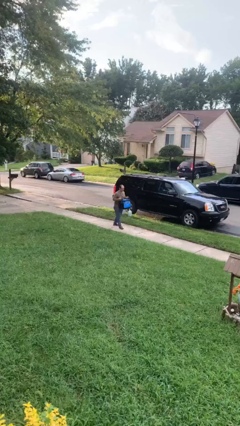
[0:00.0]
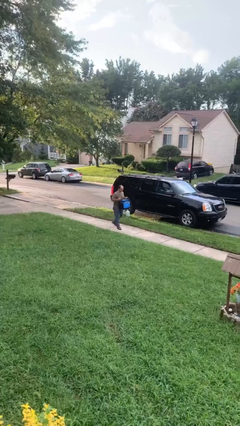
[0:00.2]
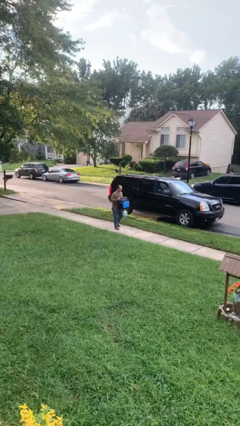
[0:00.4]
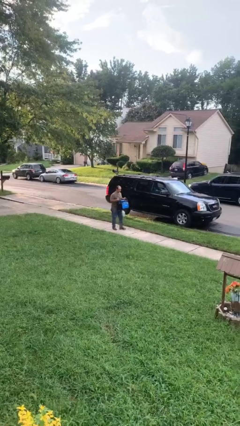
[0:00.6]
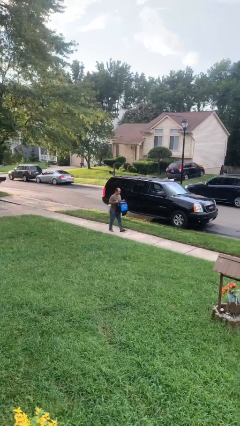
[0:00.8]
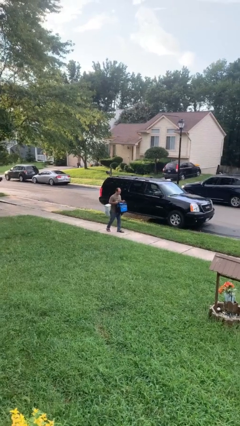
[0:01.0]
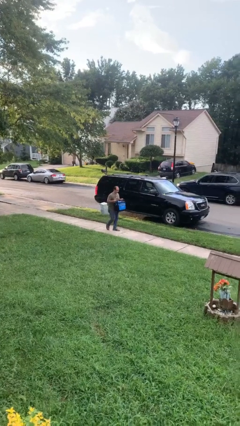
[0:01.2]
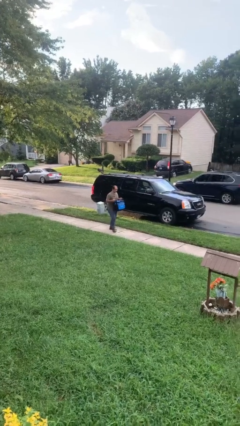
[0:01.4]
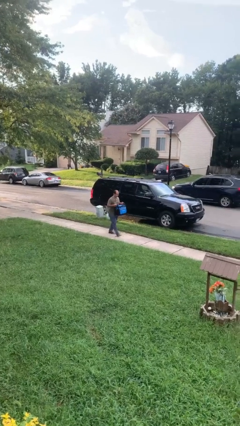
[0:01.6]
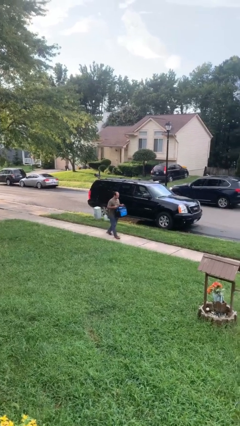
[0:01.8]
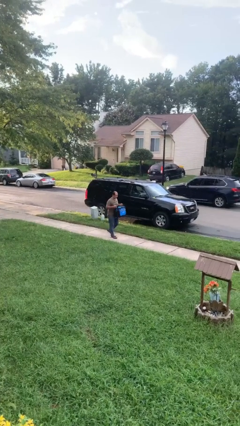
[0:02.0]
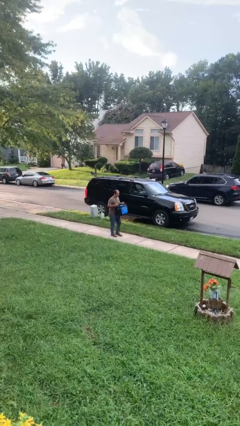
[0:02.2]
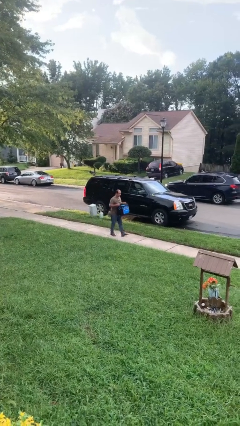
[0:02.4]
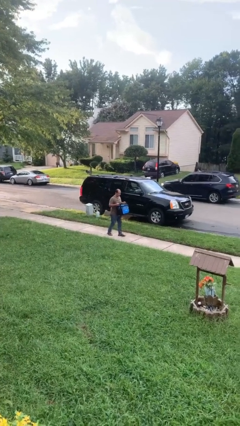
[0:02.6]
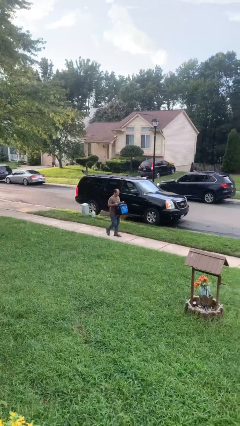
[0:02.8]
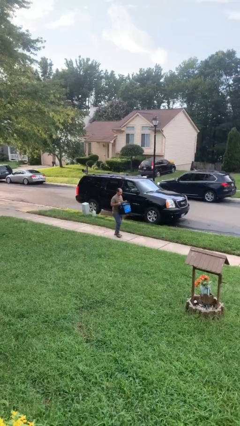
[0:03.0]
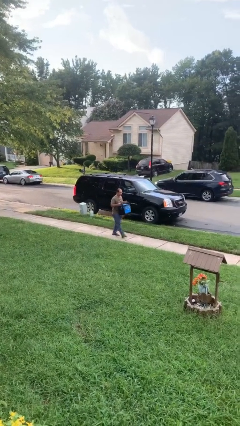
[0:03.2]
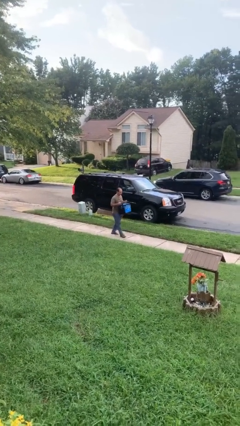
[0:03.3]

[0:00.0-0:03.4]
person carries heavy object

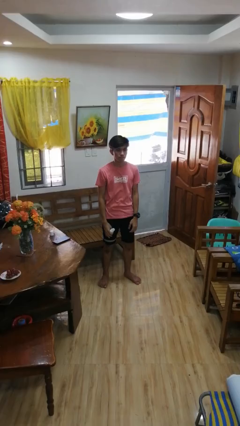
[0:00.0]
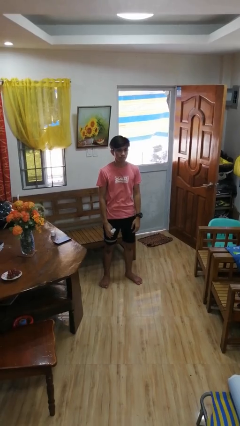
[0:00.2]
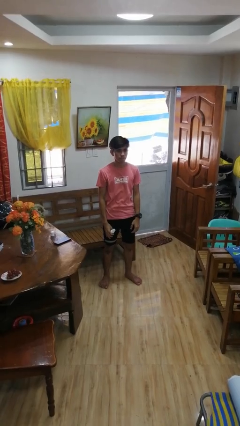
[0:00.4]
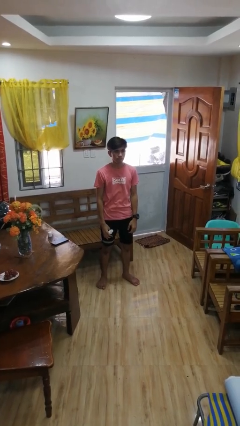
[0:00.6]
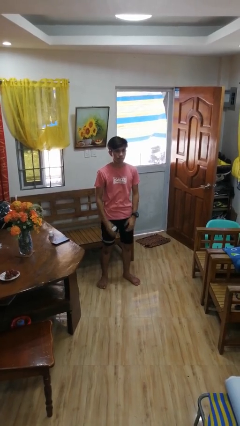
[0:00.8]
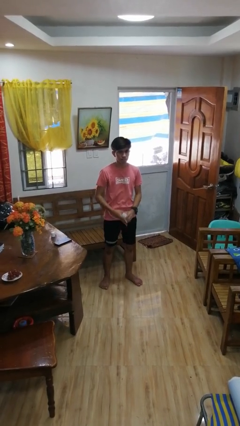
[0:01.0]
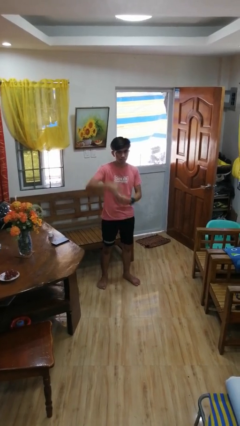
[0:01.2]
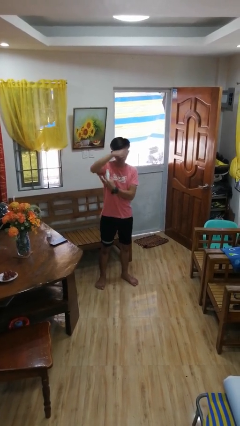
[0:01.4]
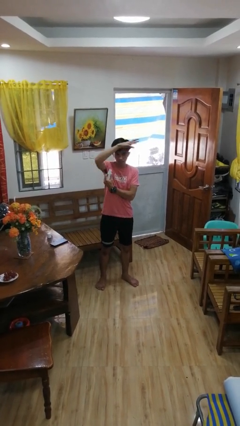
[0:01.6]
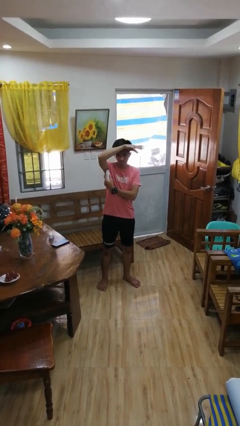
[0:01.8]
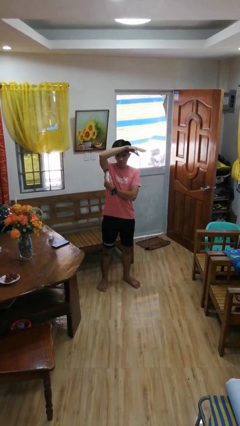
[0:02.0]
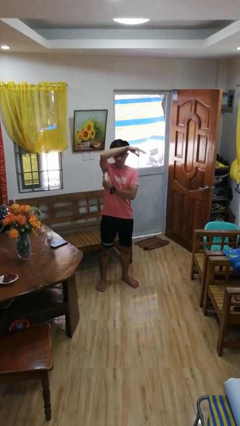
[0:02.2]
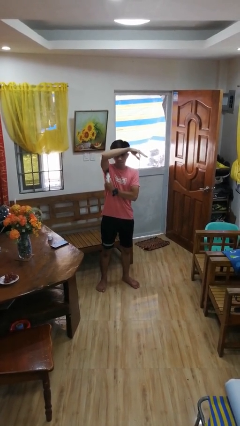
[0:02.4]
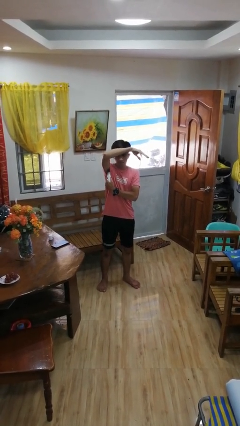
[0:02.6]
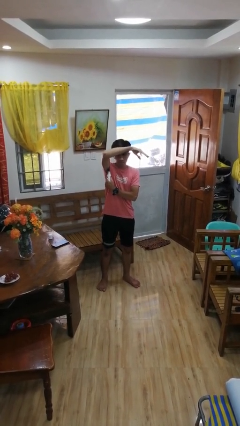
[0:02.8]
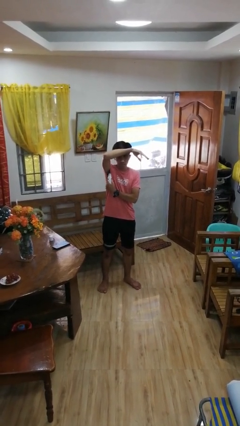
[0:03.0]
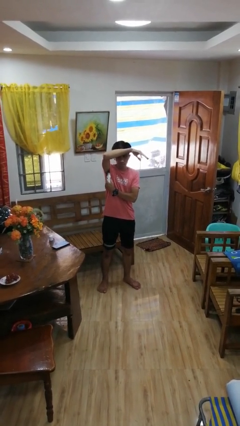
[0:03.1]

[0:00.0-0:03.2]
person applies deodorant

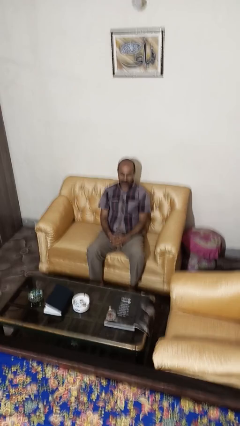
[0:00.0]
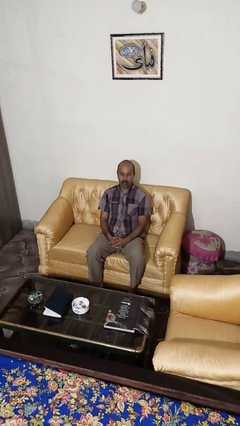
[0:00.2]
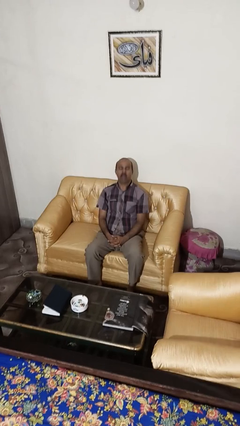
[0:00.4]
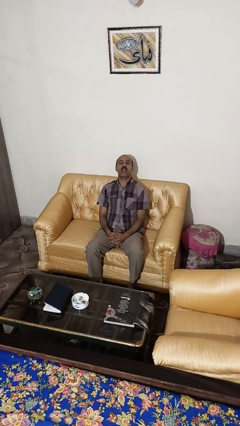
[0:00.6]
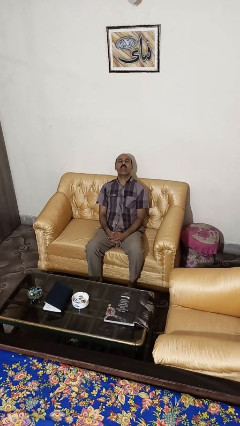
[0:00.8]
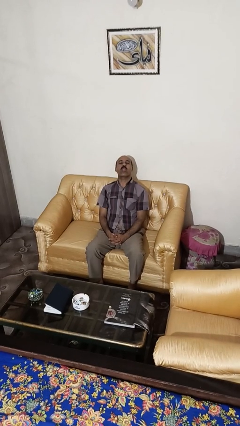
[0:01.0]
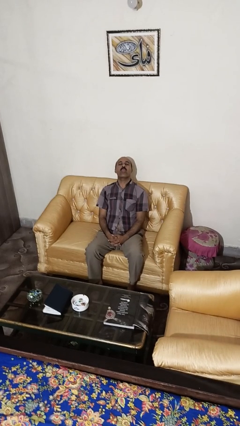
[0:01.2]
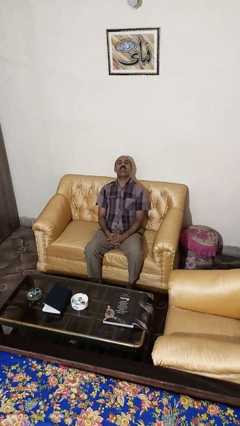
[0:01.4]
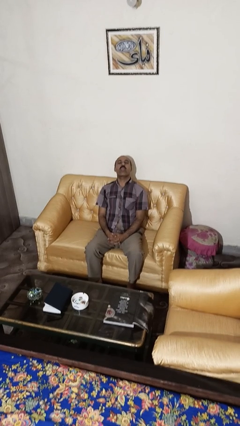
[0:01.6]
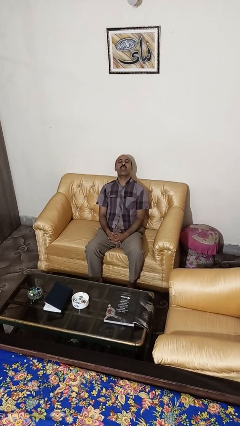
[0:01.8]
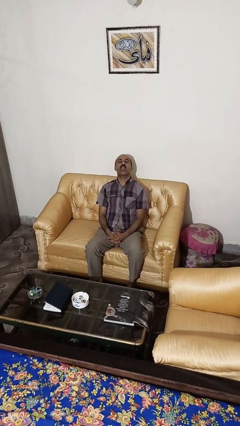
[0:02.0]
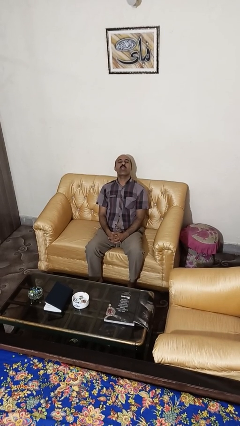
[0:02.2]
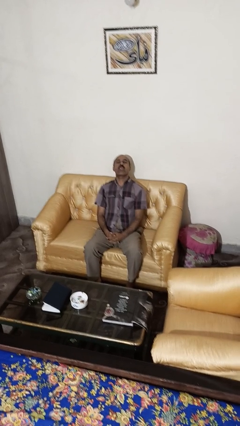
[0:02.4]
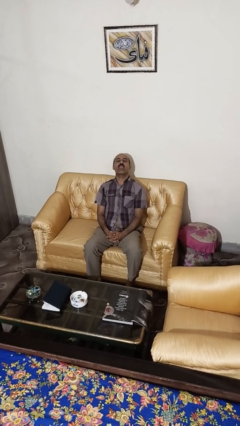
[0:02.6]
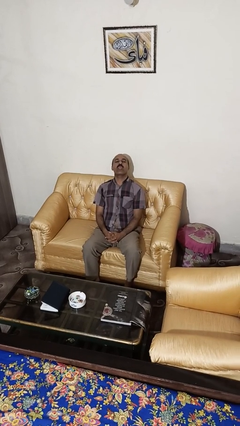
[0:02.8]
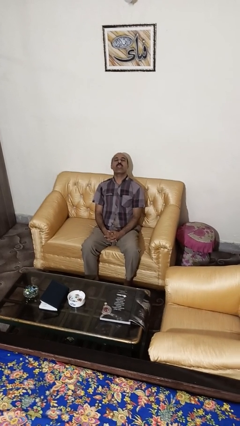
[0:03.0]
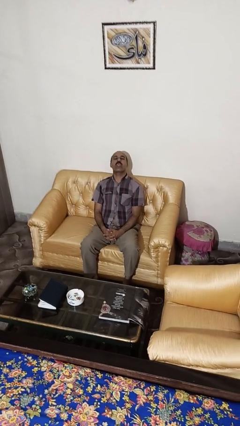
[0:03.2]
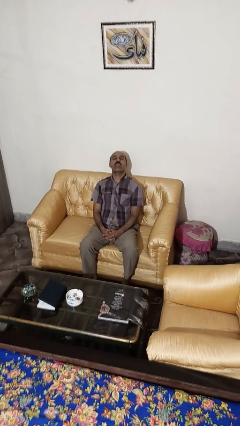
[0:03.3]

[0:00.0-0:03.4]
person sticks out tongue

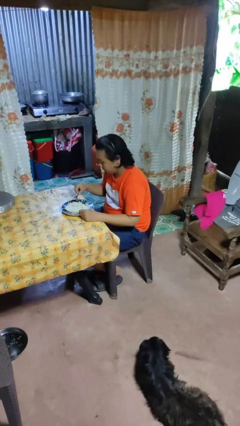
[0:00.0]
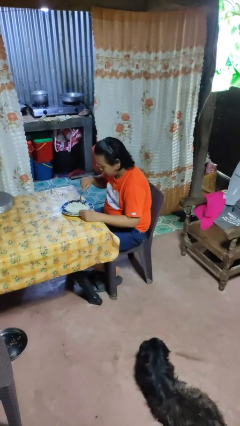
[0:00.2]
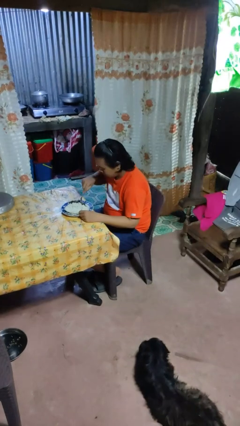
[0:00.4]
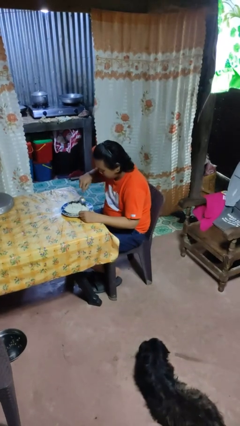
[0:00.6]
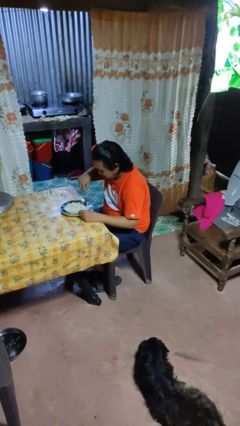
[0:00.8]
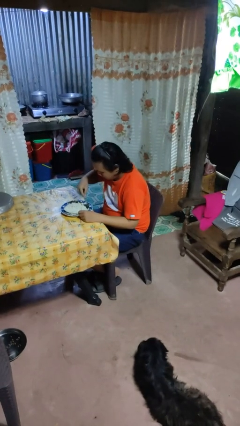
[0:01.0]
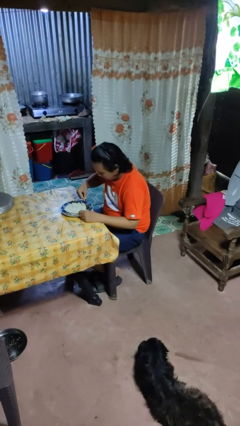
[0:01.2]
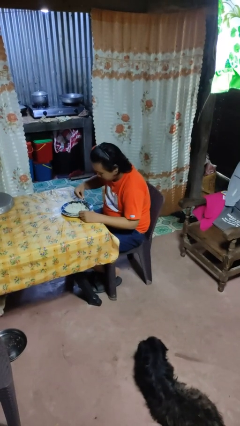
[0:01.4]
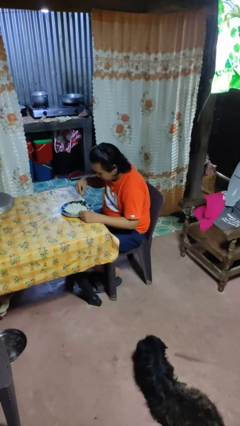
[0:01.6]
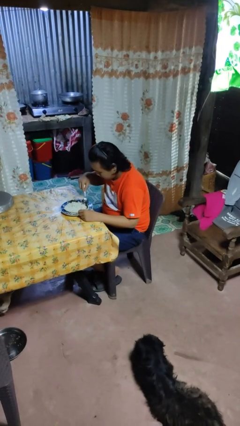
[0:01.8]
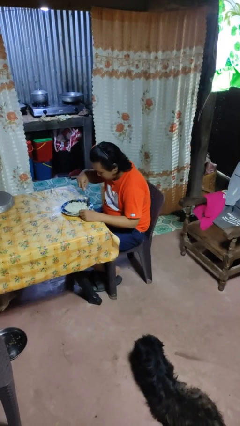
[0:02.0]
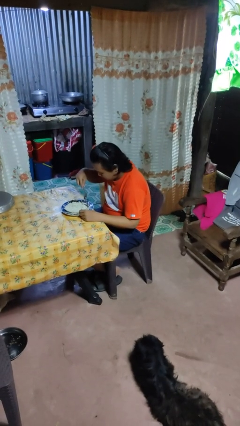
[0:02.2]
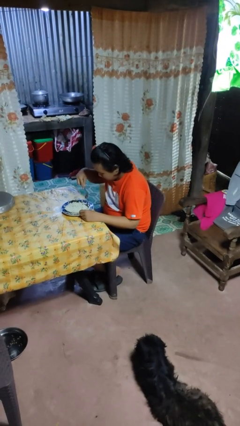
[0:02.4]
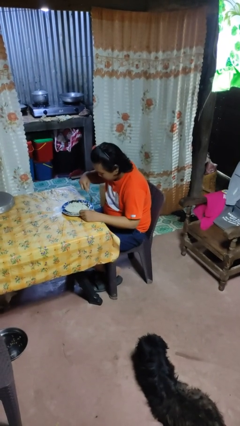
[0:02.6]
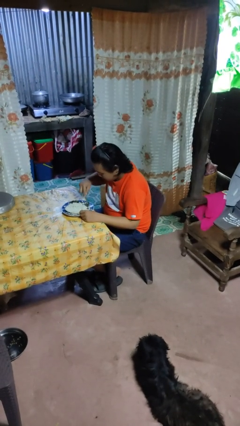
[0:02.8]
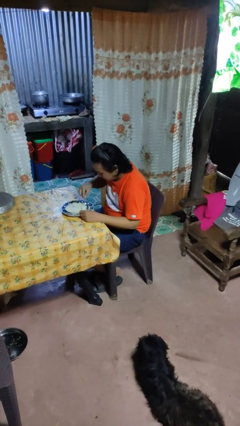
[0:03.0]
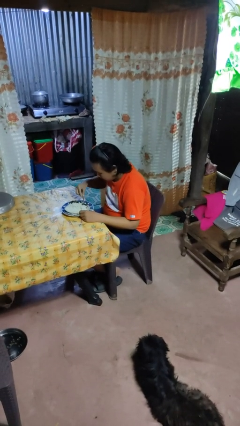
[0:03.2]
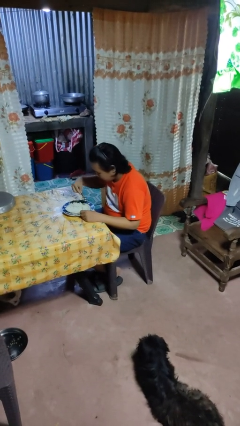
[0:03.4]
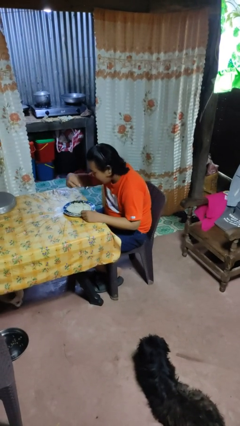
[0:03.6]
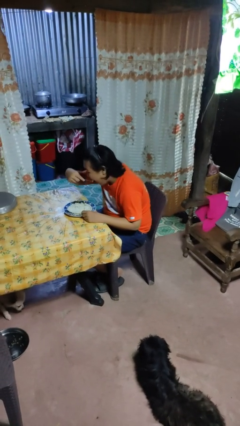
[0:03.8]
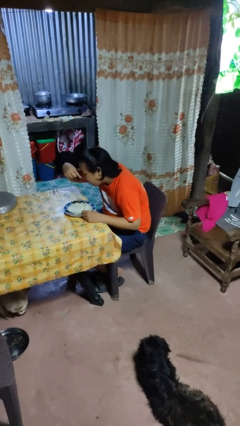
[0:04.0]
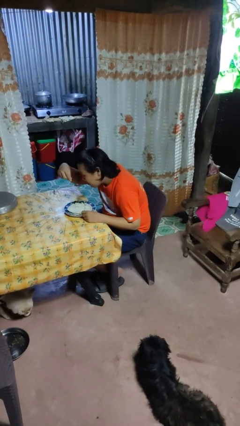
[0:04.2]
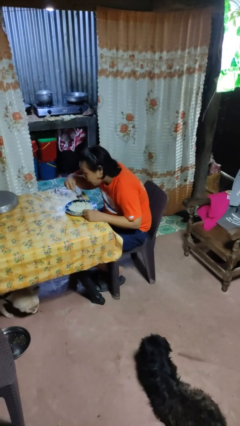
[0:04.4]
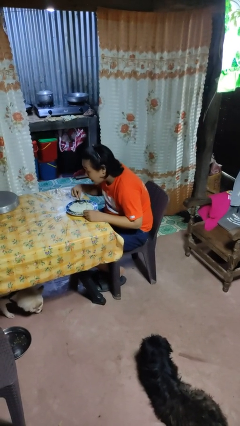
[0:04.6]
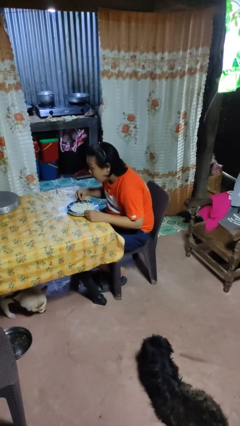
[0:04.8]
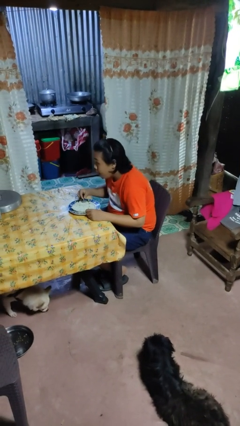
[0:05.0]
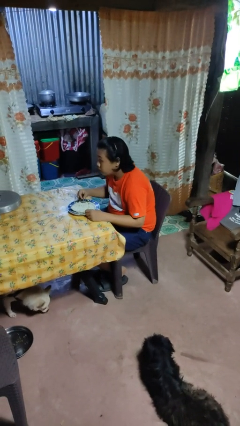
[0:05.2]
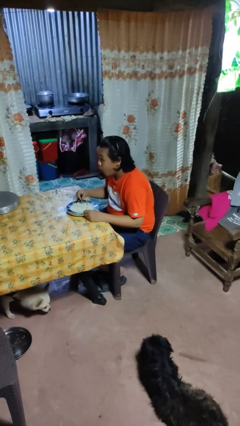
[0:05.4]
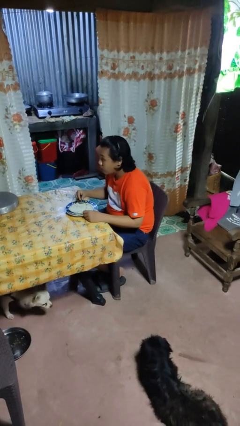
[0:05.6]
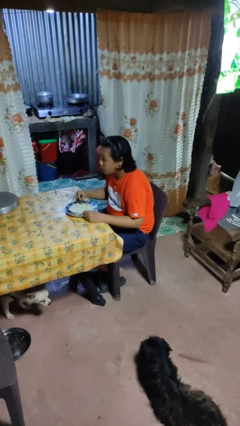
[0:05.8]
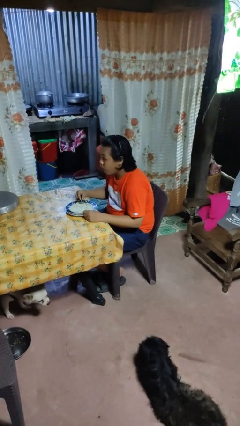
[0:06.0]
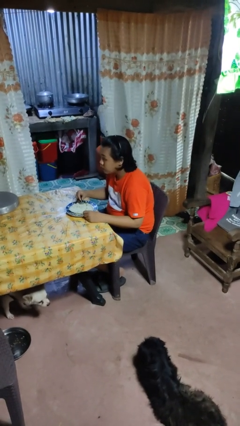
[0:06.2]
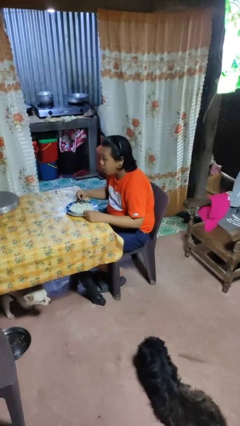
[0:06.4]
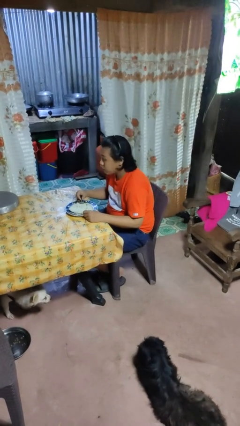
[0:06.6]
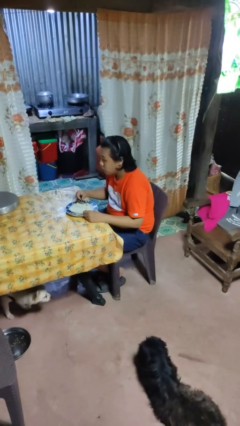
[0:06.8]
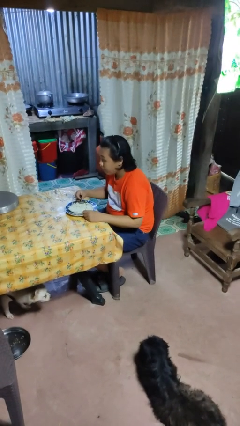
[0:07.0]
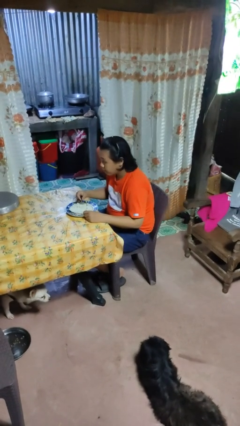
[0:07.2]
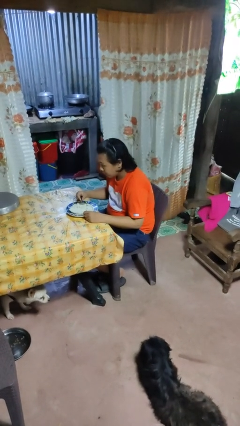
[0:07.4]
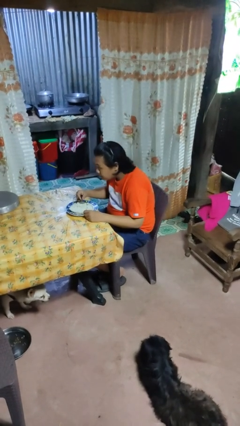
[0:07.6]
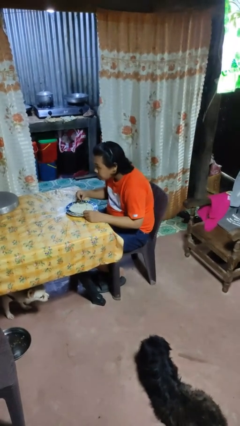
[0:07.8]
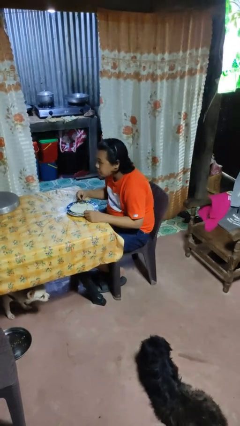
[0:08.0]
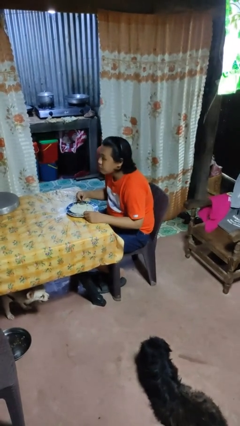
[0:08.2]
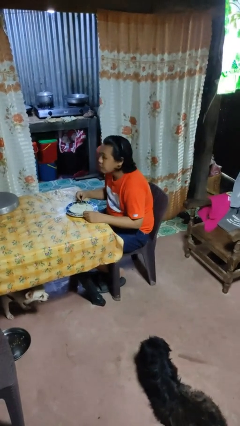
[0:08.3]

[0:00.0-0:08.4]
person eats with utensil
